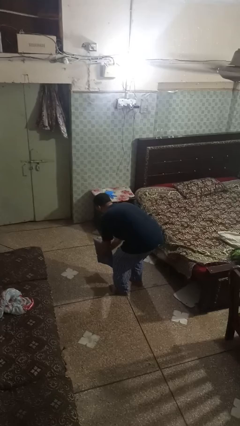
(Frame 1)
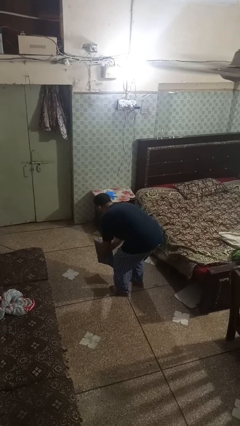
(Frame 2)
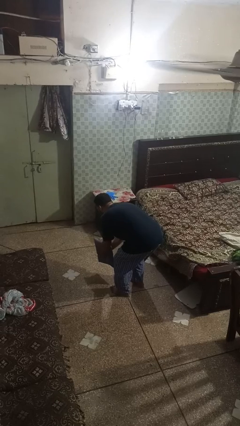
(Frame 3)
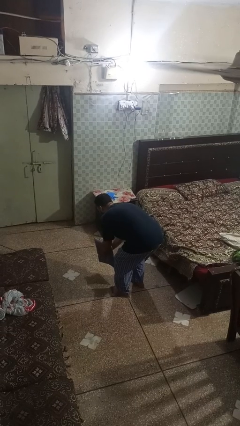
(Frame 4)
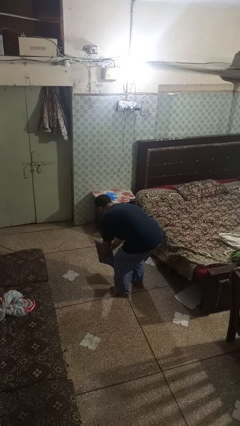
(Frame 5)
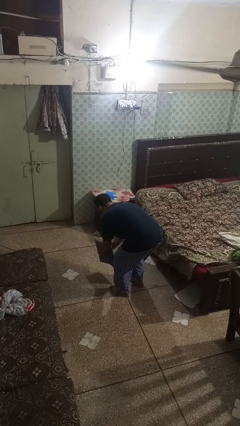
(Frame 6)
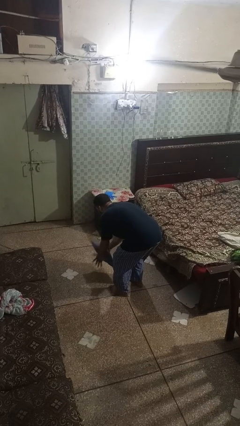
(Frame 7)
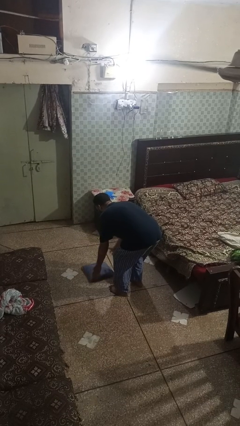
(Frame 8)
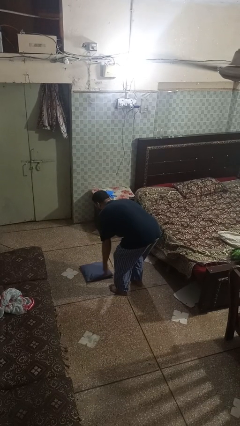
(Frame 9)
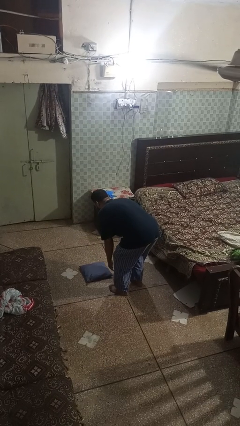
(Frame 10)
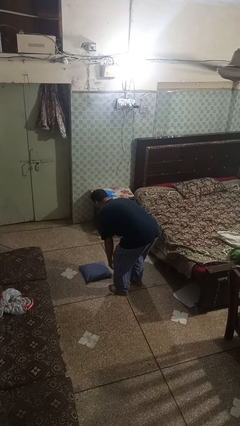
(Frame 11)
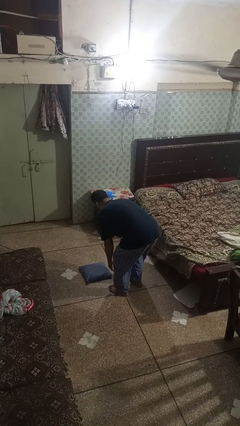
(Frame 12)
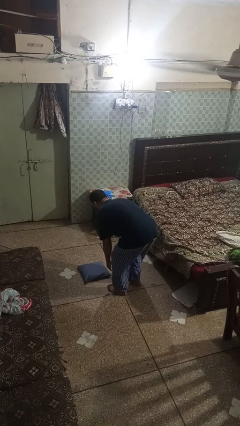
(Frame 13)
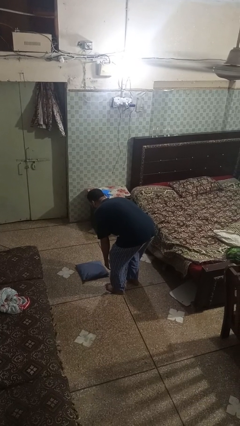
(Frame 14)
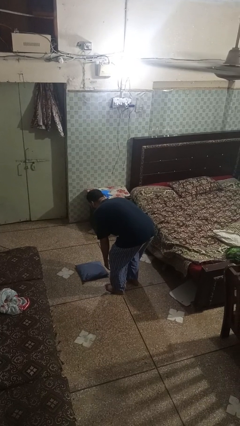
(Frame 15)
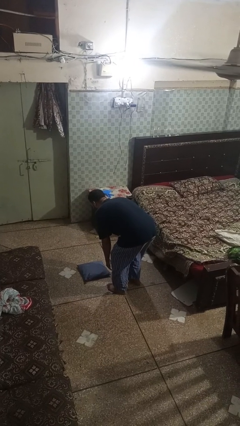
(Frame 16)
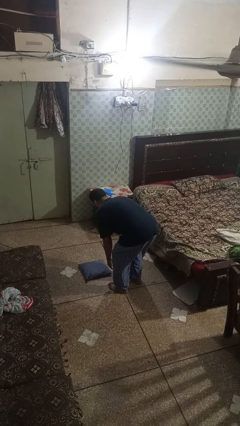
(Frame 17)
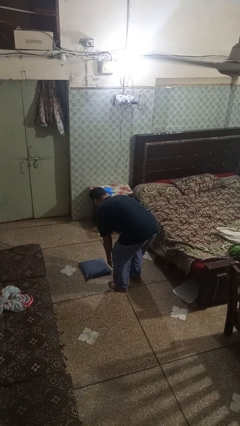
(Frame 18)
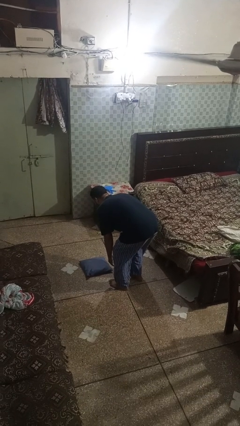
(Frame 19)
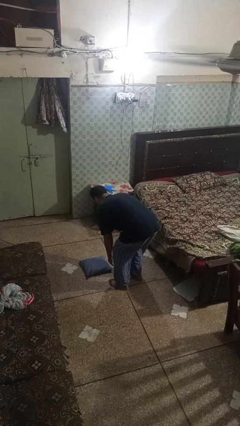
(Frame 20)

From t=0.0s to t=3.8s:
person catches dropped object

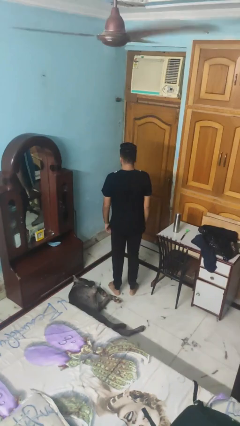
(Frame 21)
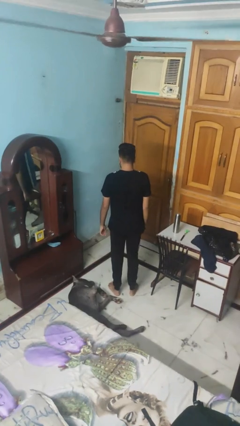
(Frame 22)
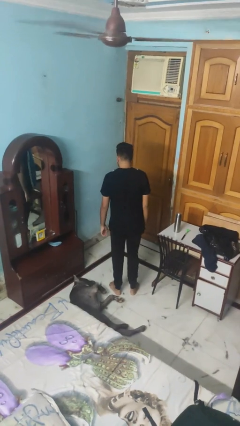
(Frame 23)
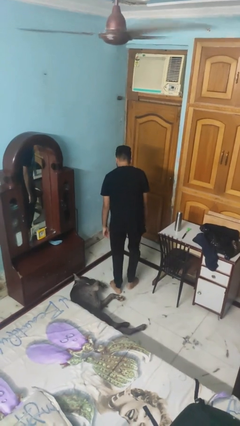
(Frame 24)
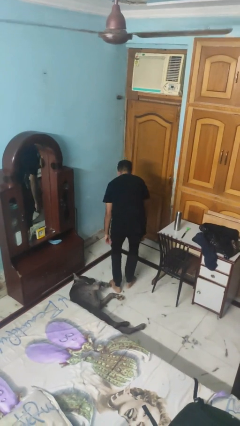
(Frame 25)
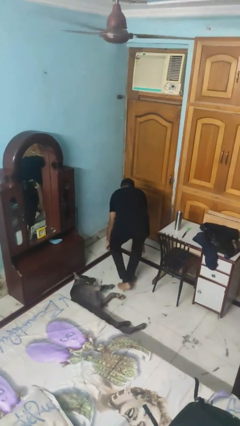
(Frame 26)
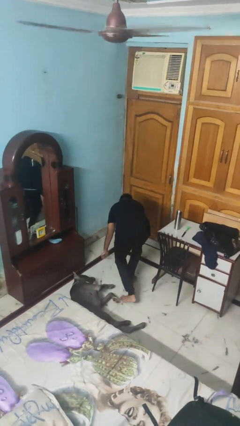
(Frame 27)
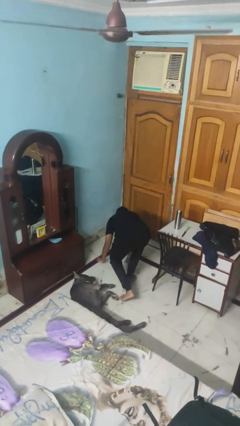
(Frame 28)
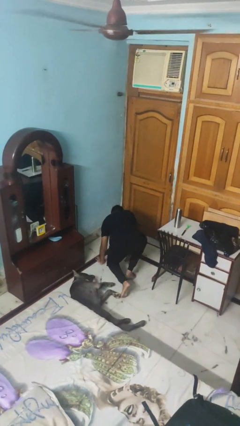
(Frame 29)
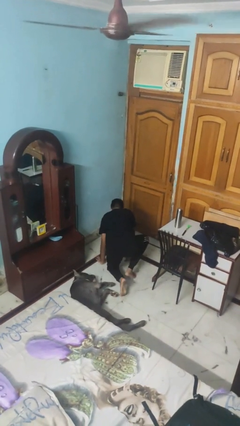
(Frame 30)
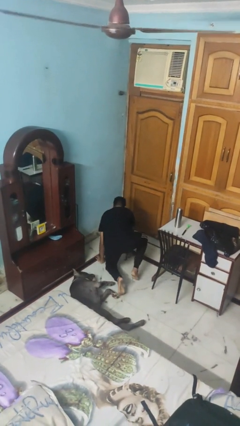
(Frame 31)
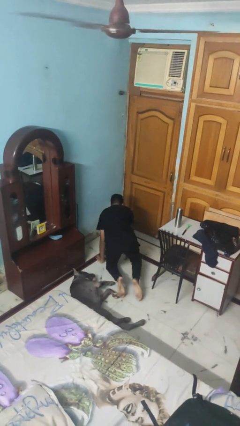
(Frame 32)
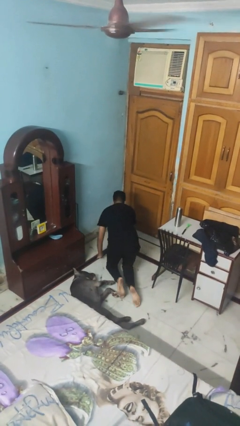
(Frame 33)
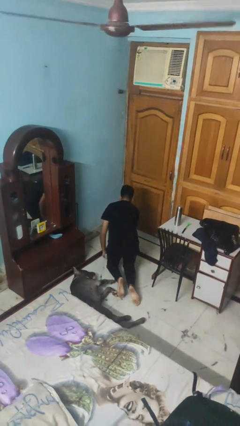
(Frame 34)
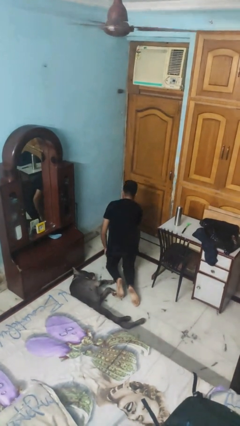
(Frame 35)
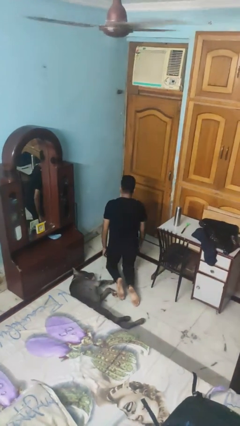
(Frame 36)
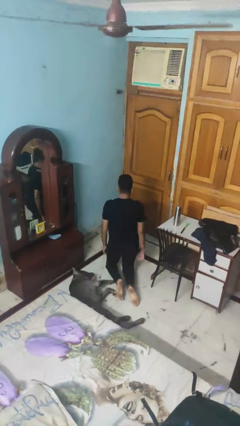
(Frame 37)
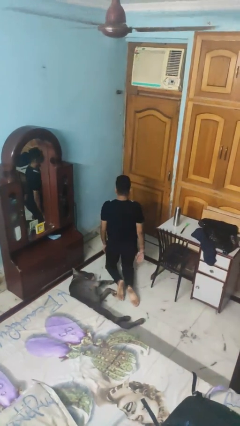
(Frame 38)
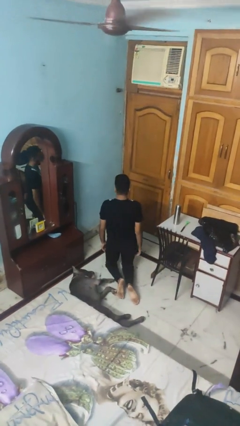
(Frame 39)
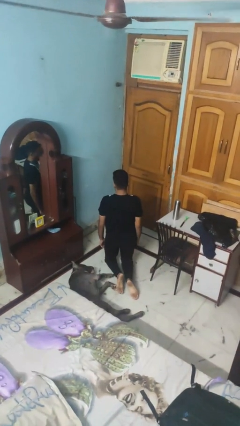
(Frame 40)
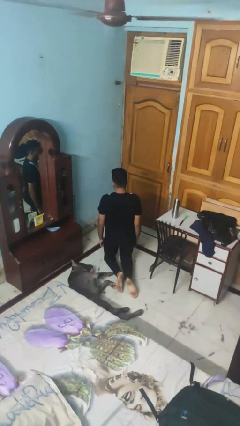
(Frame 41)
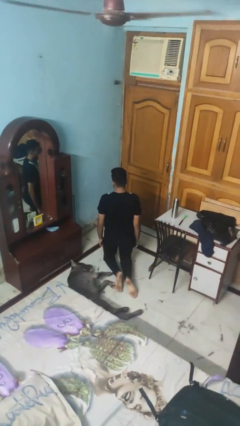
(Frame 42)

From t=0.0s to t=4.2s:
person kneels

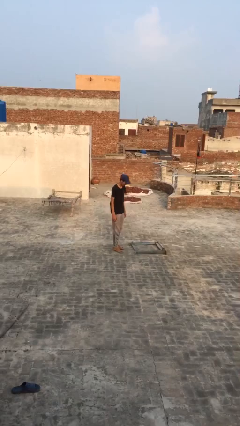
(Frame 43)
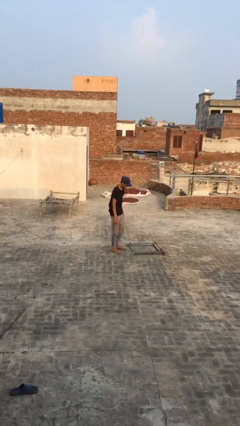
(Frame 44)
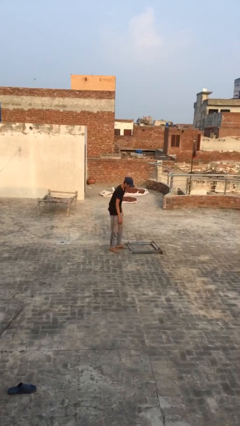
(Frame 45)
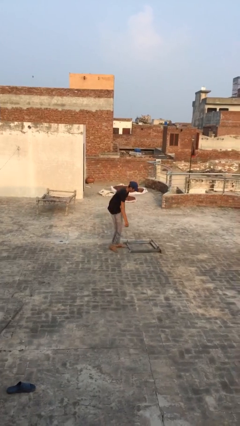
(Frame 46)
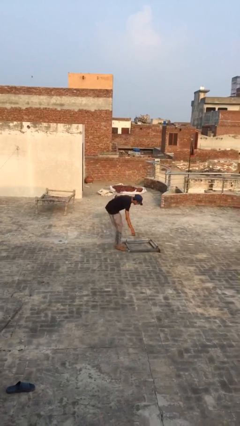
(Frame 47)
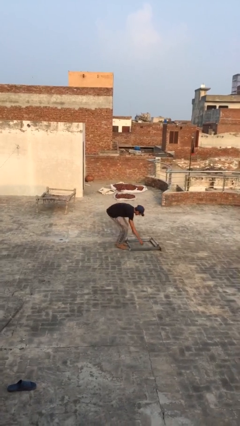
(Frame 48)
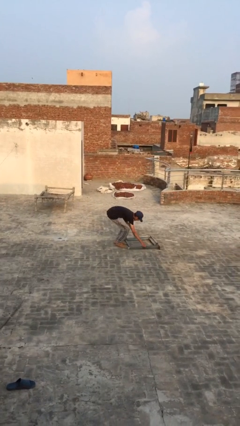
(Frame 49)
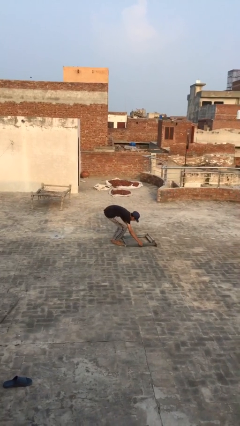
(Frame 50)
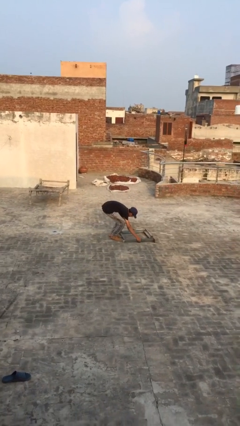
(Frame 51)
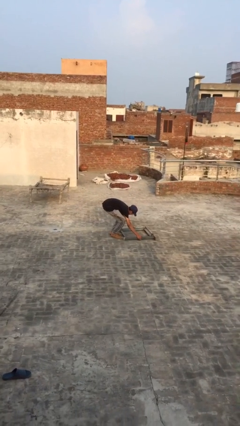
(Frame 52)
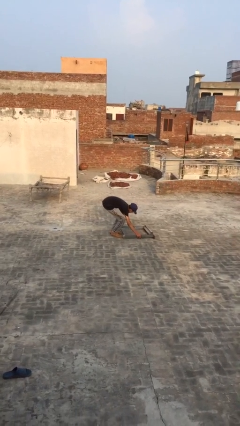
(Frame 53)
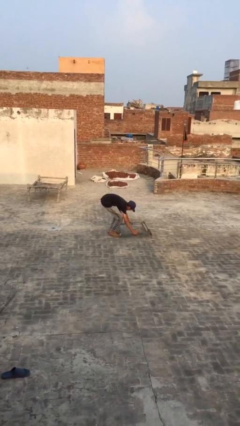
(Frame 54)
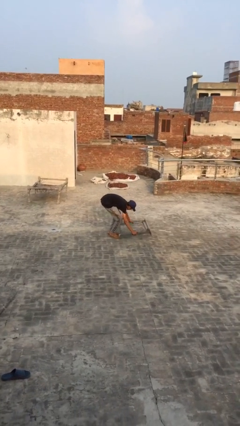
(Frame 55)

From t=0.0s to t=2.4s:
person picks up object from floor

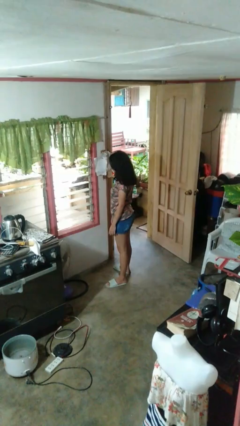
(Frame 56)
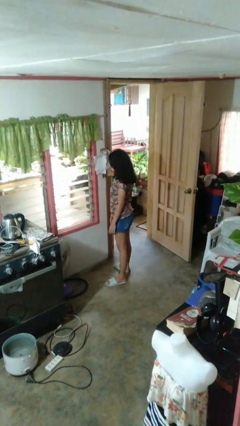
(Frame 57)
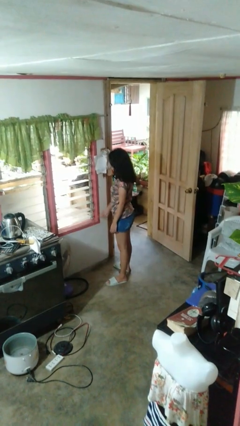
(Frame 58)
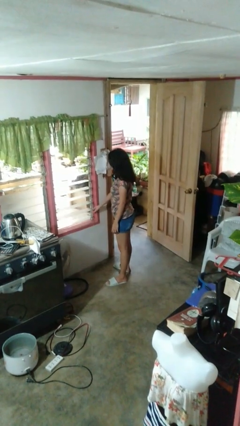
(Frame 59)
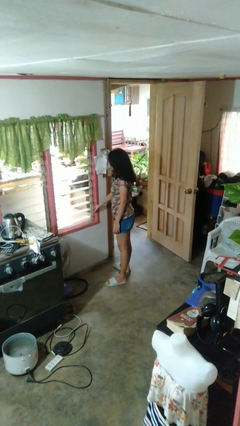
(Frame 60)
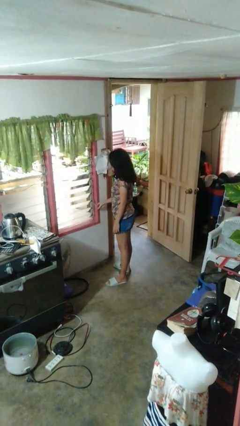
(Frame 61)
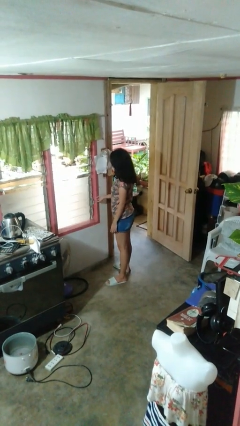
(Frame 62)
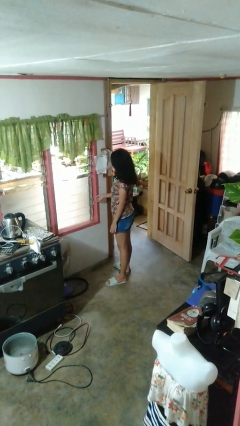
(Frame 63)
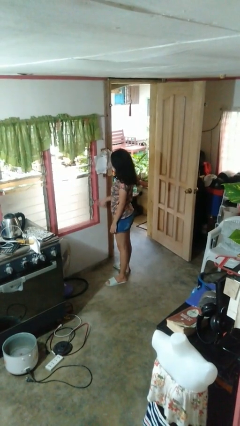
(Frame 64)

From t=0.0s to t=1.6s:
person closes home window

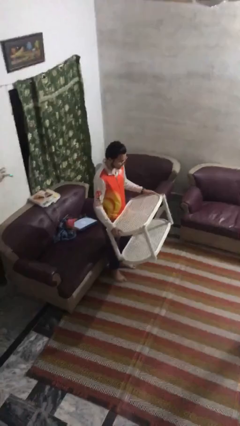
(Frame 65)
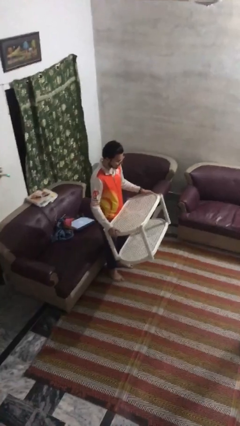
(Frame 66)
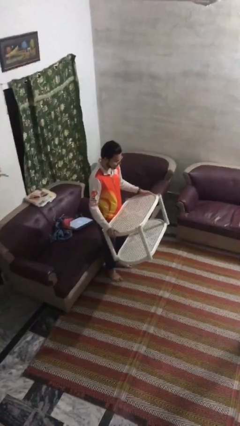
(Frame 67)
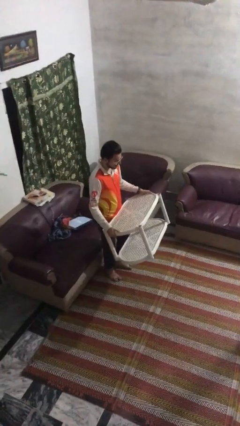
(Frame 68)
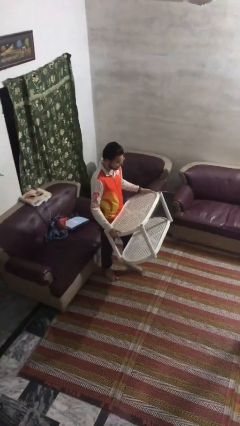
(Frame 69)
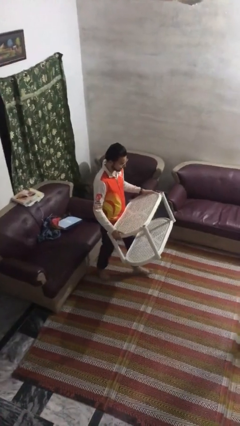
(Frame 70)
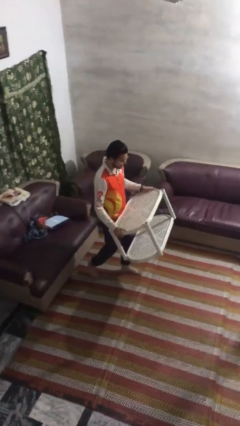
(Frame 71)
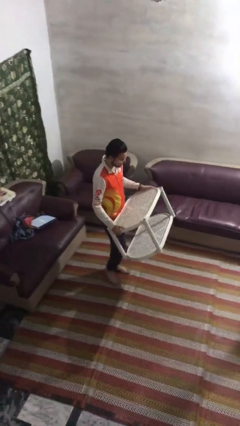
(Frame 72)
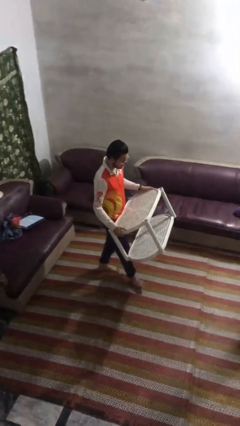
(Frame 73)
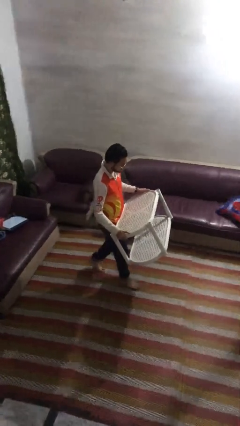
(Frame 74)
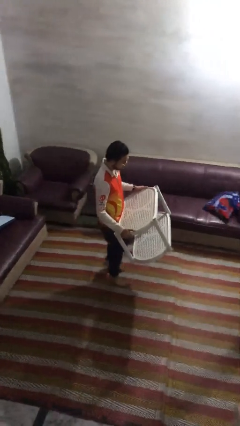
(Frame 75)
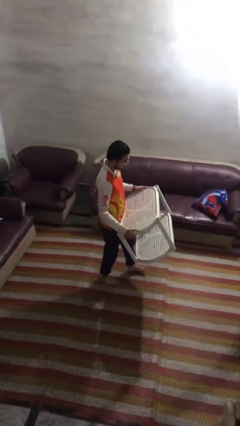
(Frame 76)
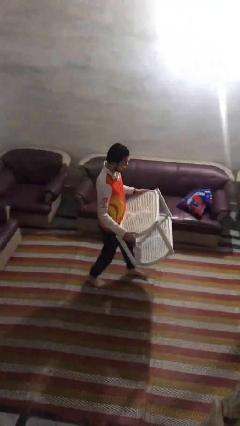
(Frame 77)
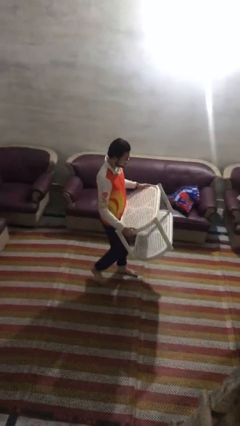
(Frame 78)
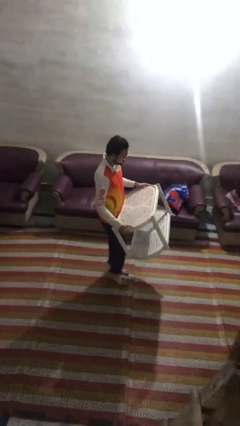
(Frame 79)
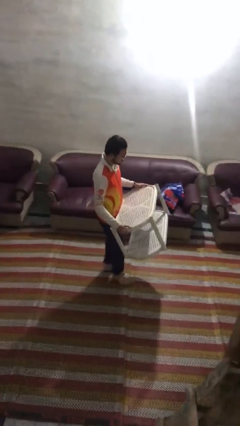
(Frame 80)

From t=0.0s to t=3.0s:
person carries furniture

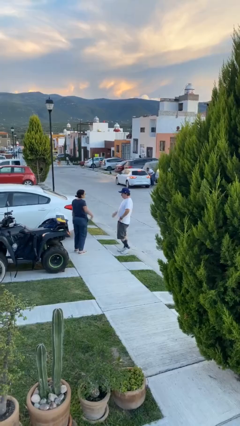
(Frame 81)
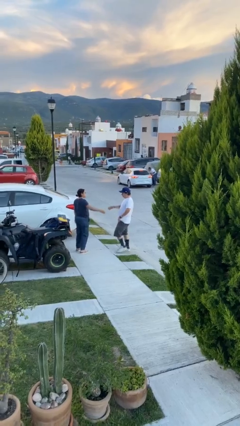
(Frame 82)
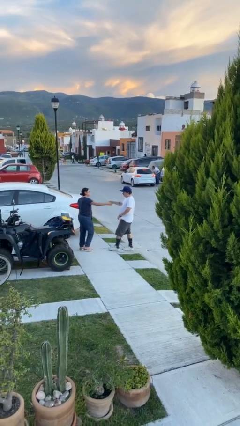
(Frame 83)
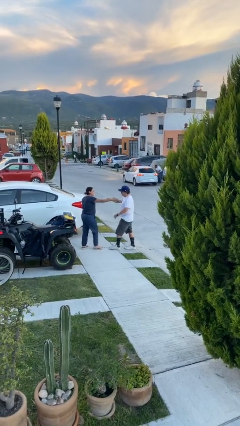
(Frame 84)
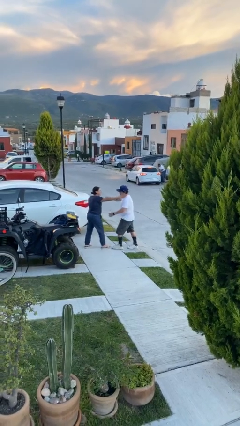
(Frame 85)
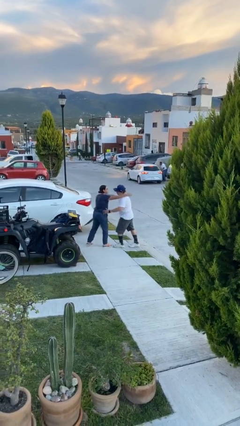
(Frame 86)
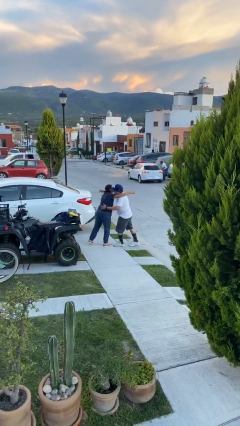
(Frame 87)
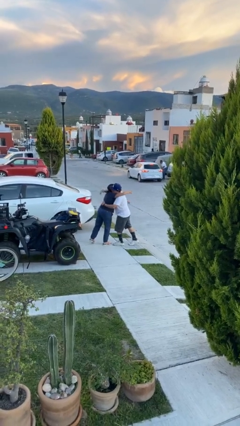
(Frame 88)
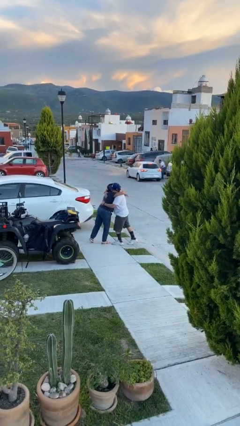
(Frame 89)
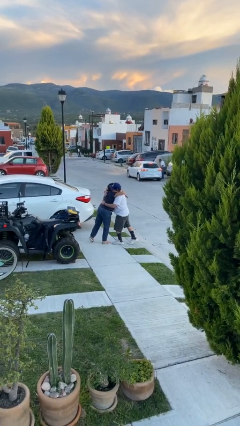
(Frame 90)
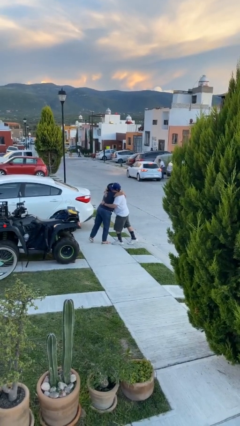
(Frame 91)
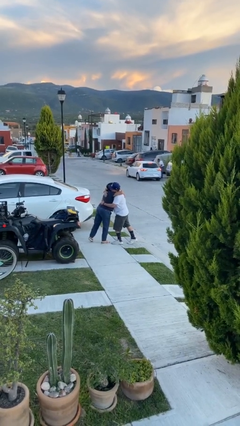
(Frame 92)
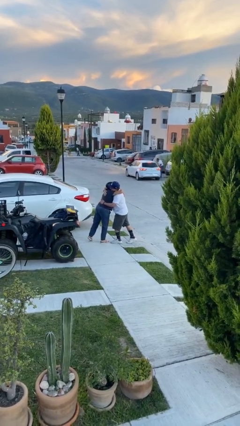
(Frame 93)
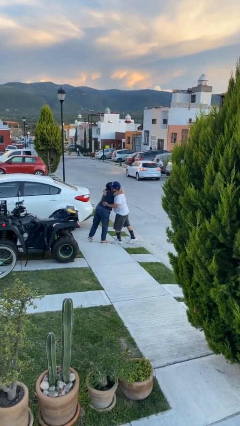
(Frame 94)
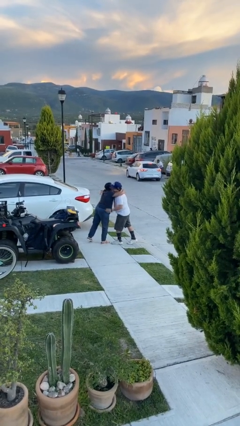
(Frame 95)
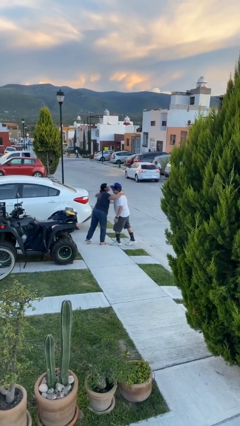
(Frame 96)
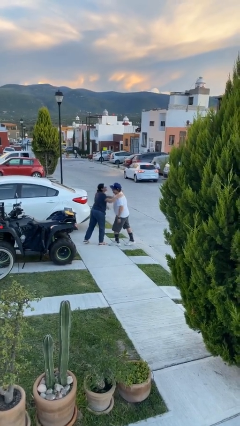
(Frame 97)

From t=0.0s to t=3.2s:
person embraces person
